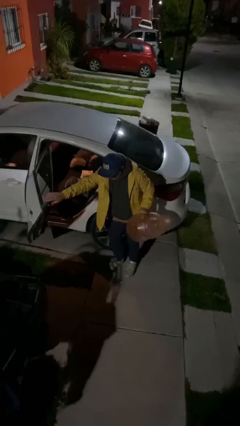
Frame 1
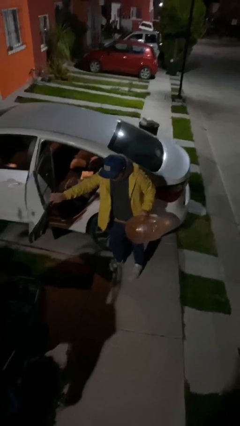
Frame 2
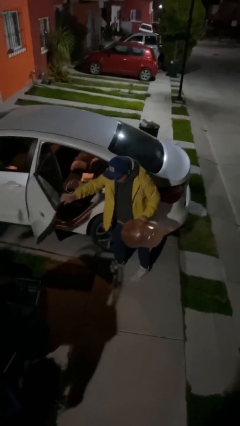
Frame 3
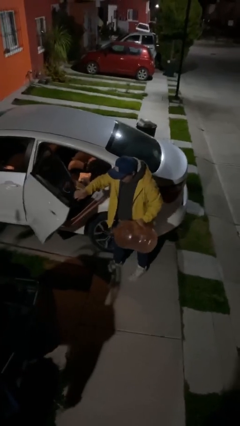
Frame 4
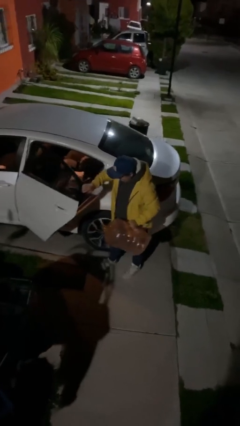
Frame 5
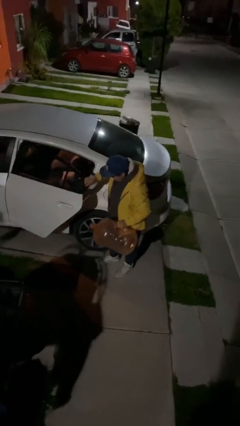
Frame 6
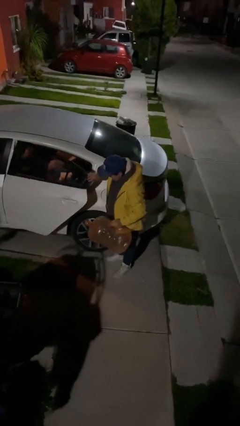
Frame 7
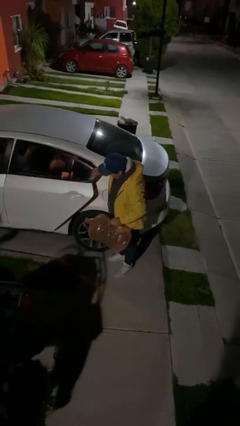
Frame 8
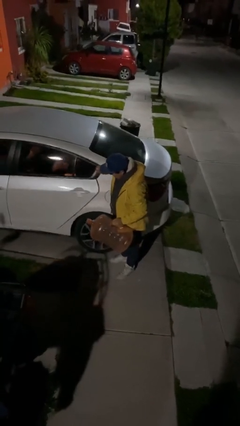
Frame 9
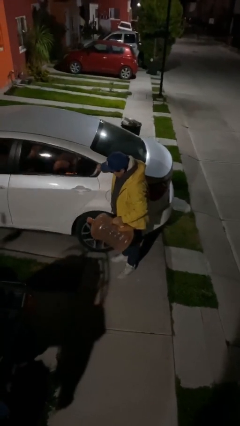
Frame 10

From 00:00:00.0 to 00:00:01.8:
person closes car door

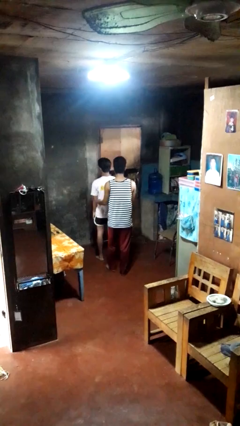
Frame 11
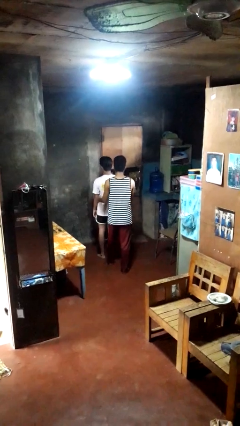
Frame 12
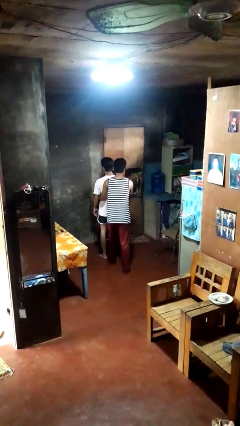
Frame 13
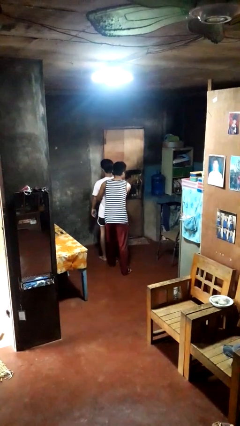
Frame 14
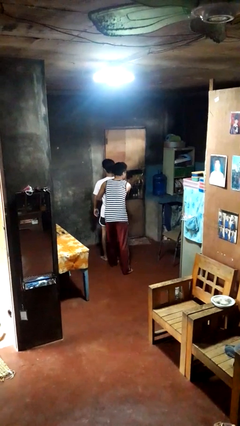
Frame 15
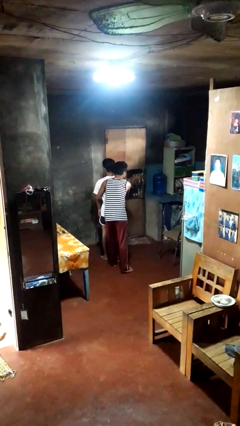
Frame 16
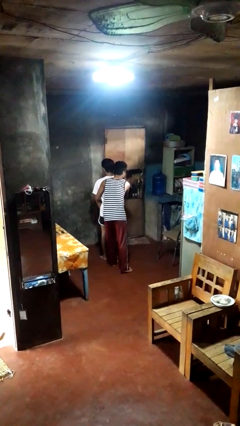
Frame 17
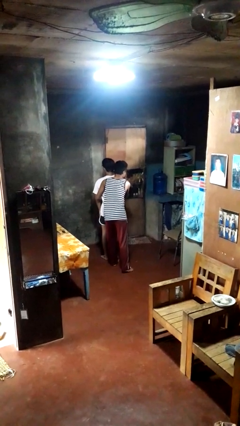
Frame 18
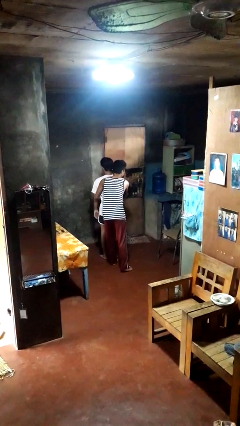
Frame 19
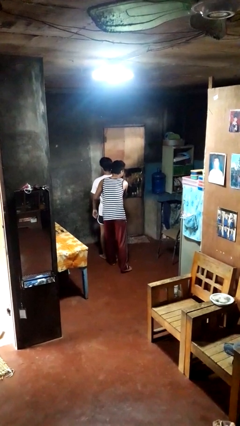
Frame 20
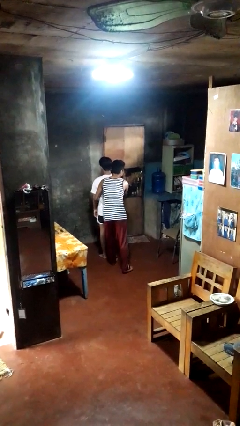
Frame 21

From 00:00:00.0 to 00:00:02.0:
person hugs person from behind

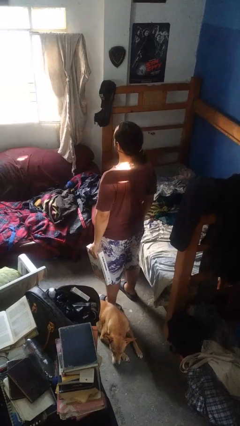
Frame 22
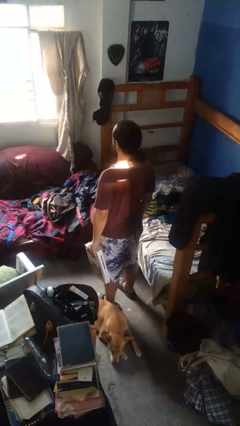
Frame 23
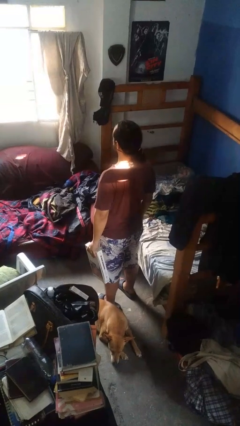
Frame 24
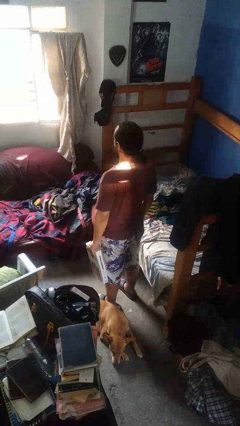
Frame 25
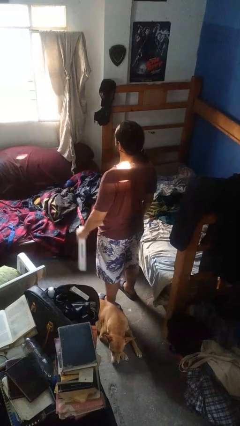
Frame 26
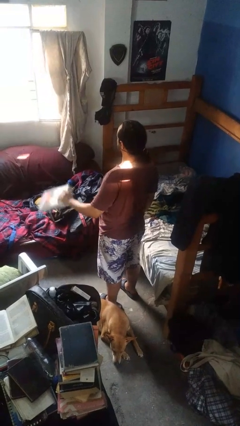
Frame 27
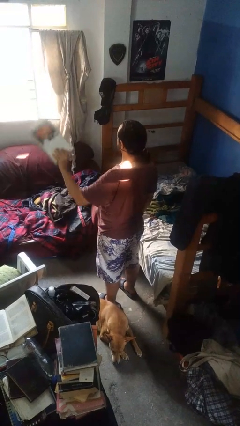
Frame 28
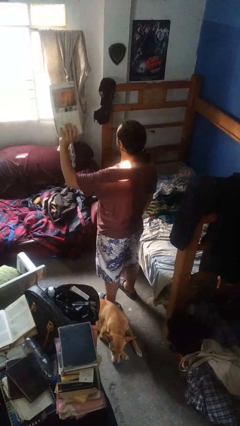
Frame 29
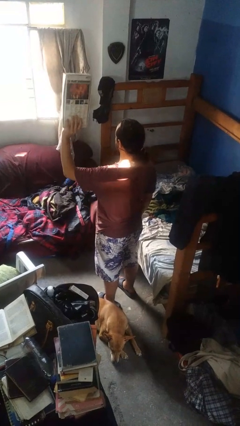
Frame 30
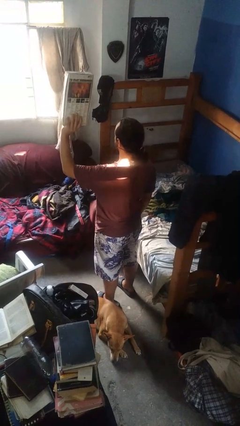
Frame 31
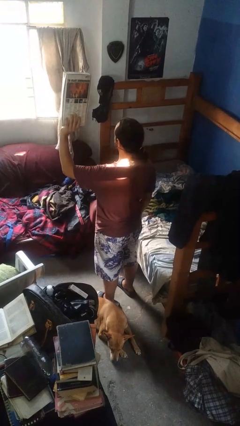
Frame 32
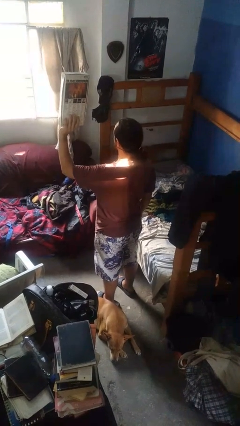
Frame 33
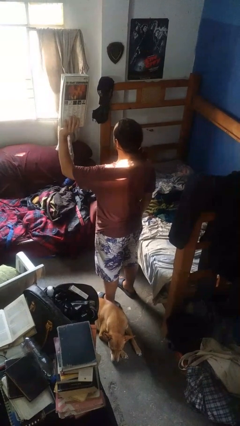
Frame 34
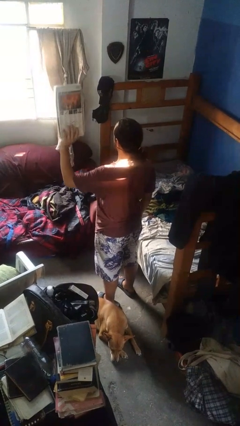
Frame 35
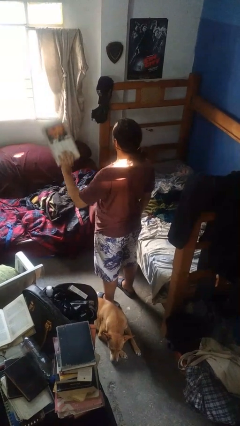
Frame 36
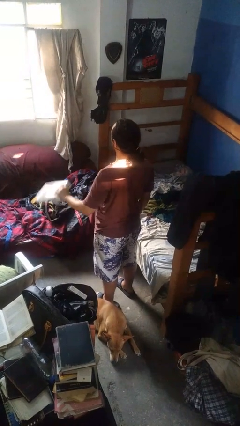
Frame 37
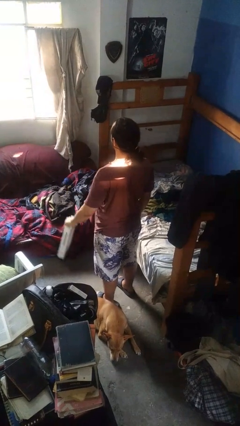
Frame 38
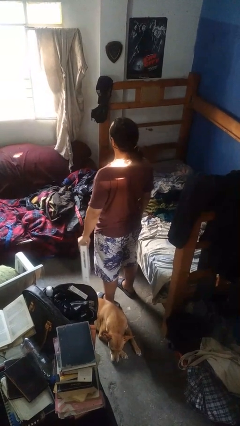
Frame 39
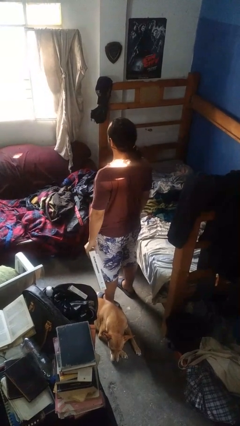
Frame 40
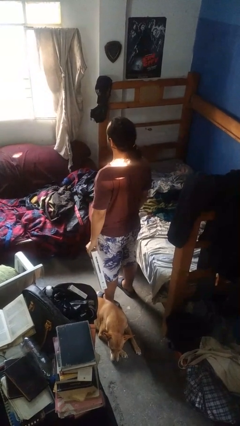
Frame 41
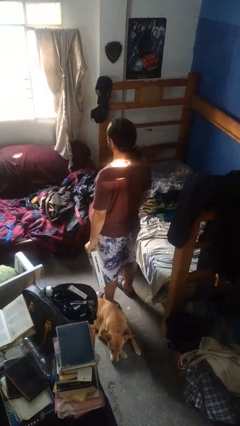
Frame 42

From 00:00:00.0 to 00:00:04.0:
person holds object above head

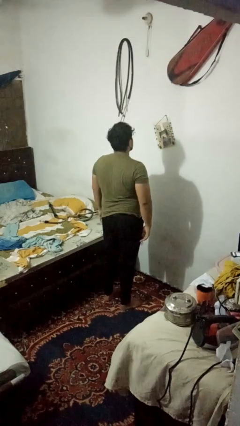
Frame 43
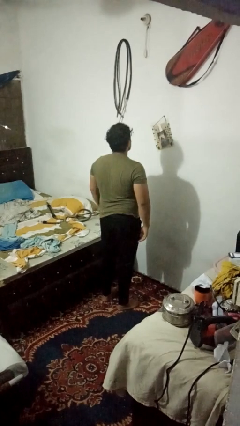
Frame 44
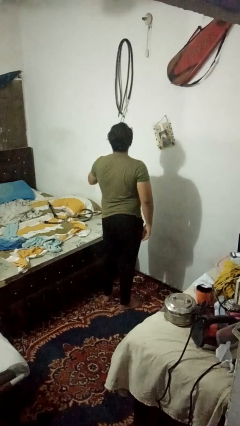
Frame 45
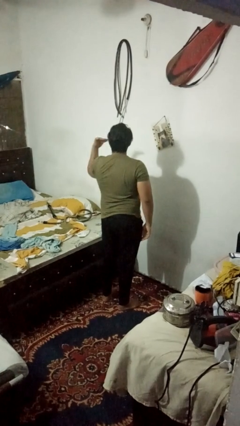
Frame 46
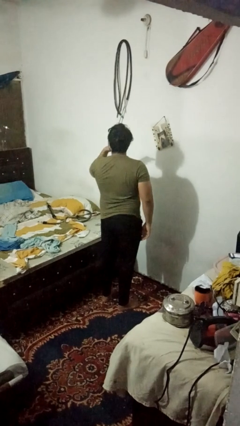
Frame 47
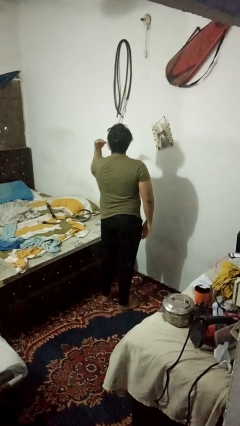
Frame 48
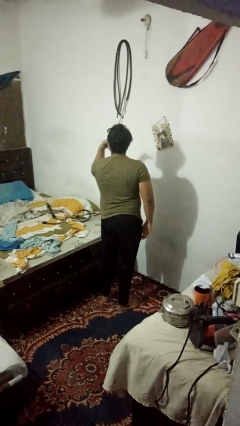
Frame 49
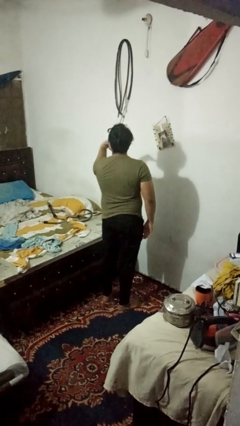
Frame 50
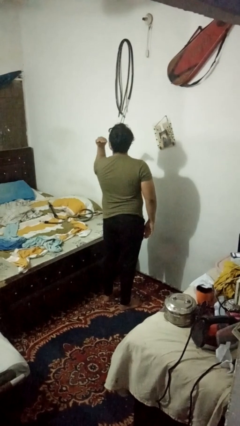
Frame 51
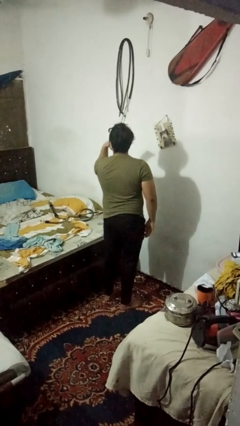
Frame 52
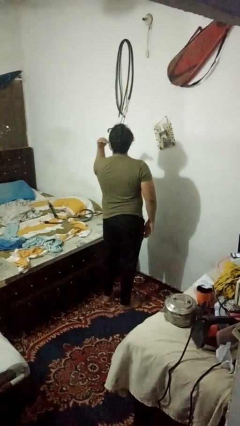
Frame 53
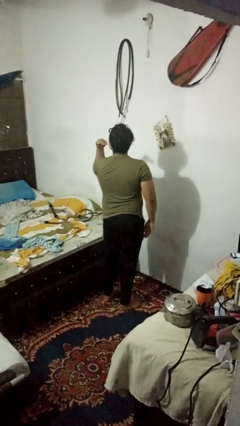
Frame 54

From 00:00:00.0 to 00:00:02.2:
person gestures cut

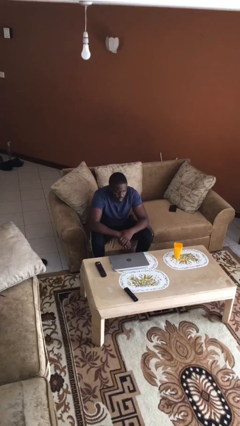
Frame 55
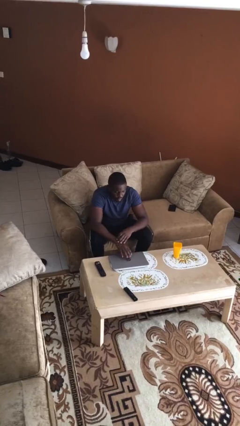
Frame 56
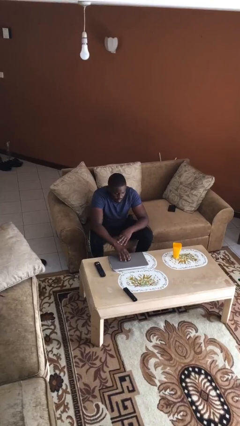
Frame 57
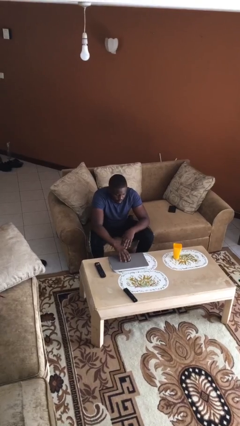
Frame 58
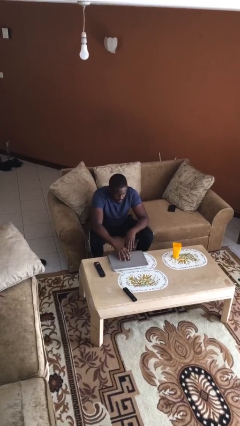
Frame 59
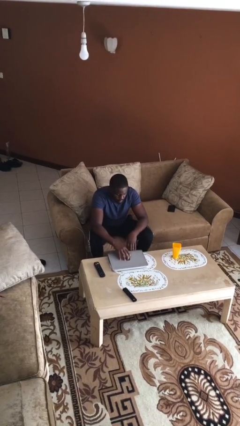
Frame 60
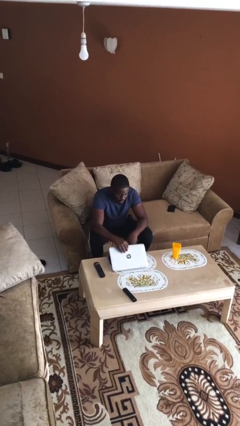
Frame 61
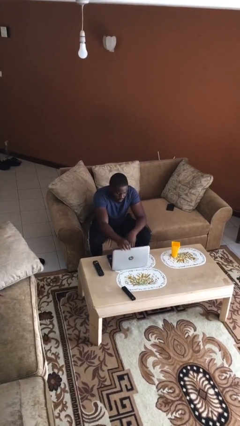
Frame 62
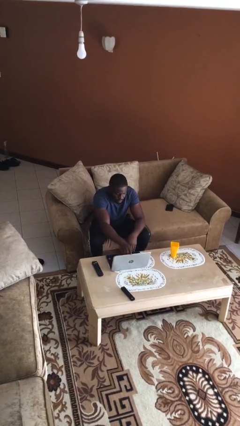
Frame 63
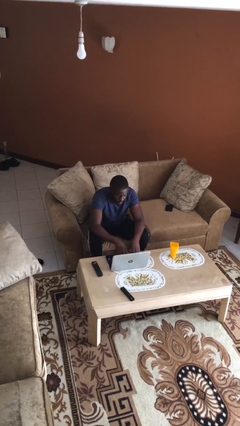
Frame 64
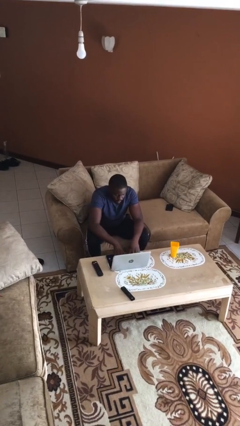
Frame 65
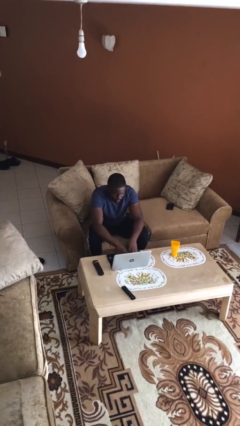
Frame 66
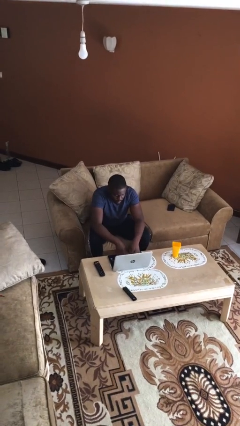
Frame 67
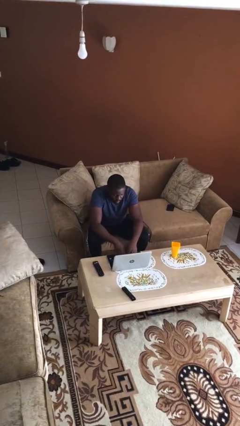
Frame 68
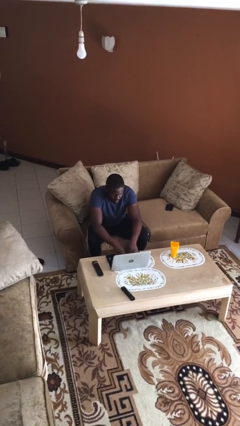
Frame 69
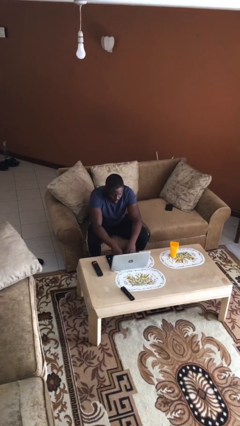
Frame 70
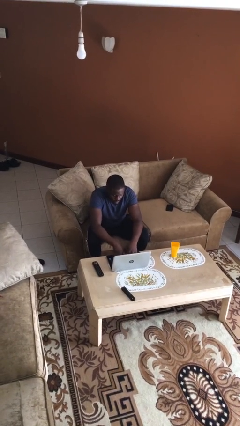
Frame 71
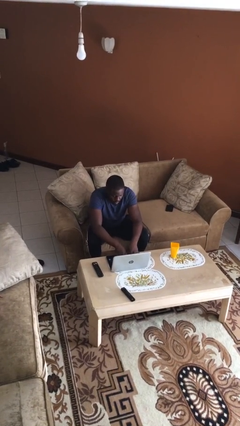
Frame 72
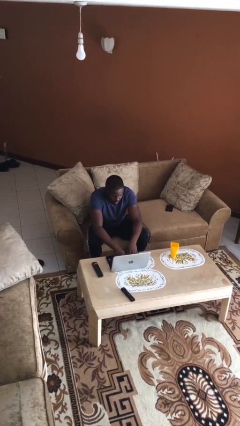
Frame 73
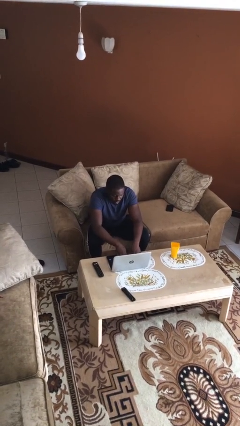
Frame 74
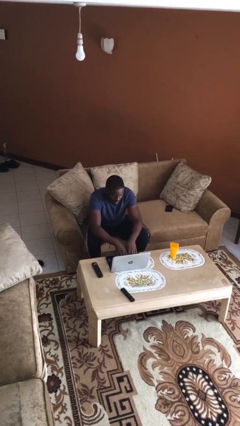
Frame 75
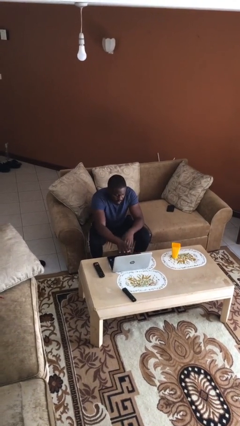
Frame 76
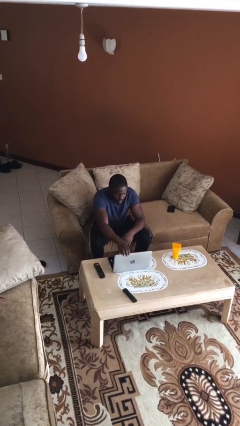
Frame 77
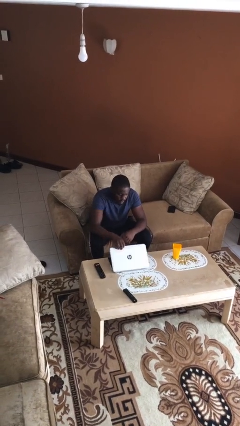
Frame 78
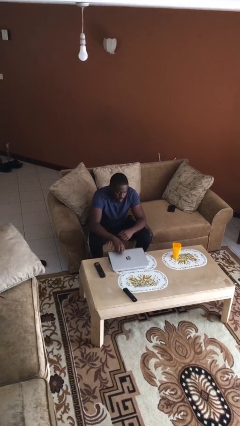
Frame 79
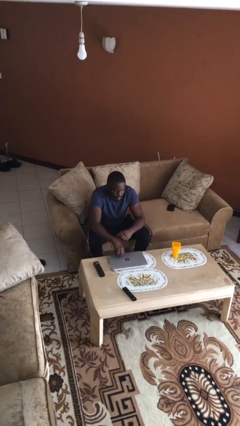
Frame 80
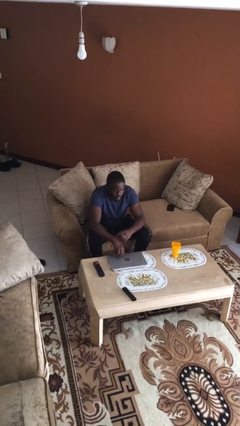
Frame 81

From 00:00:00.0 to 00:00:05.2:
person interacts with laptop

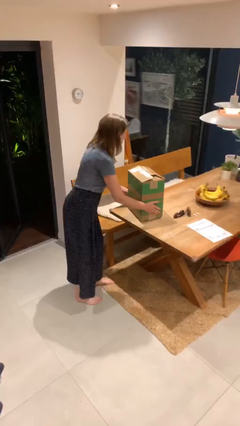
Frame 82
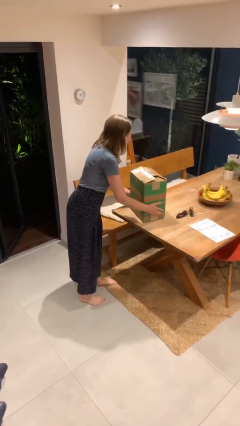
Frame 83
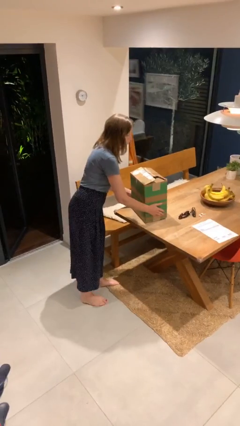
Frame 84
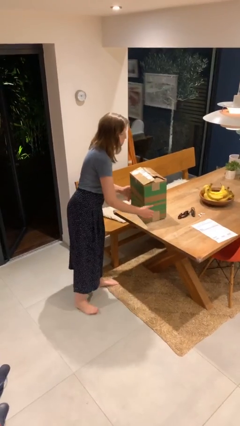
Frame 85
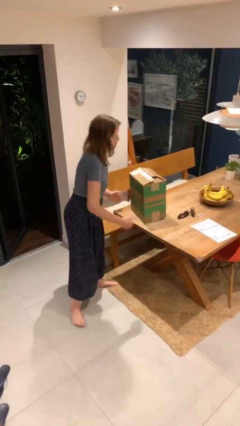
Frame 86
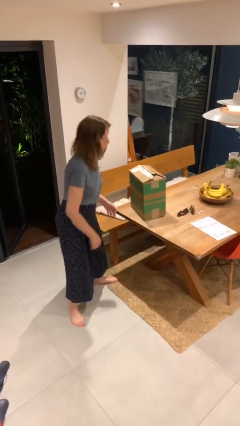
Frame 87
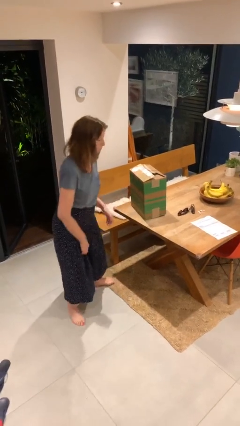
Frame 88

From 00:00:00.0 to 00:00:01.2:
person puts down object on table

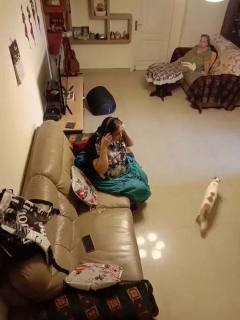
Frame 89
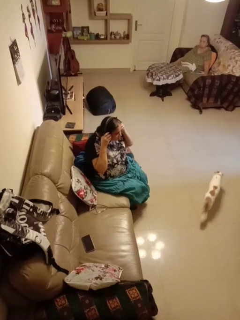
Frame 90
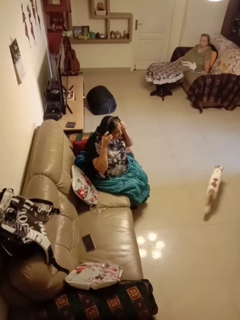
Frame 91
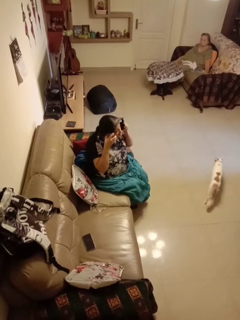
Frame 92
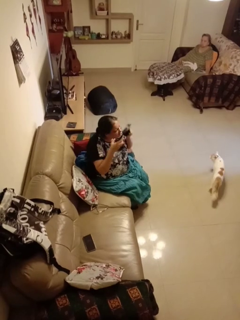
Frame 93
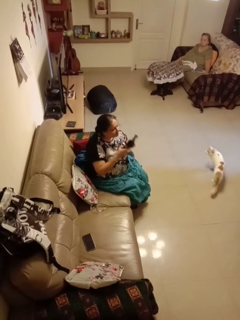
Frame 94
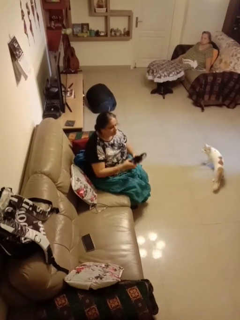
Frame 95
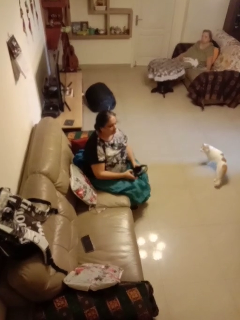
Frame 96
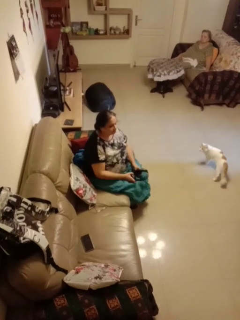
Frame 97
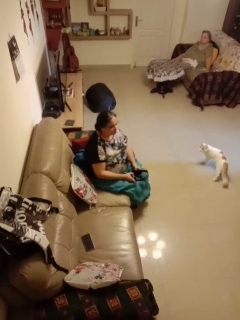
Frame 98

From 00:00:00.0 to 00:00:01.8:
person takes off headphones
